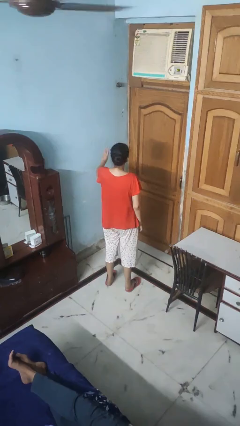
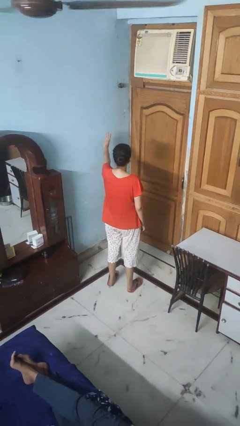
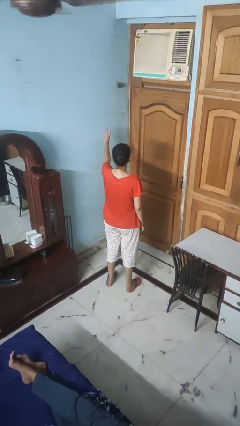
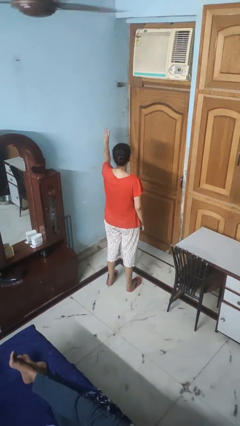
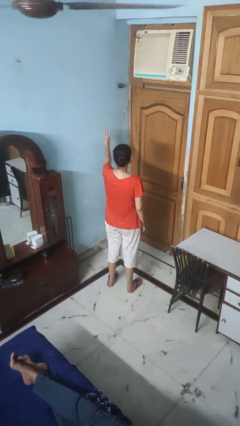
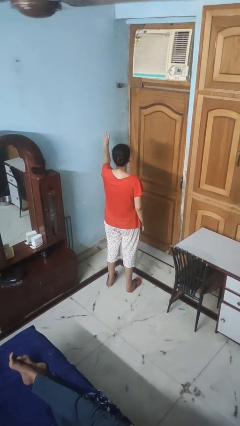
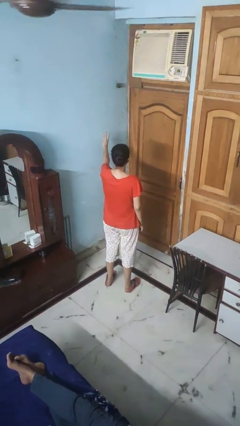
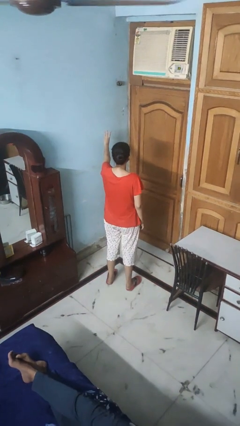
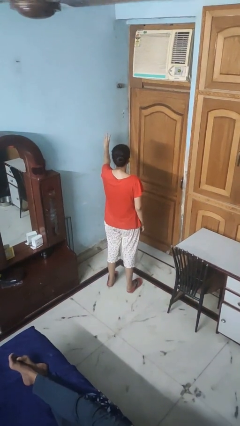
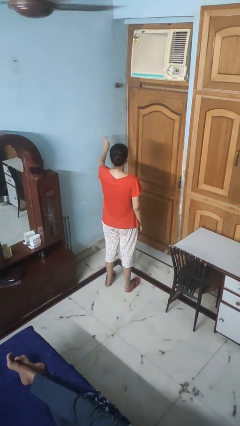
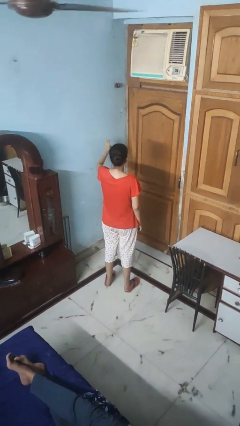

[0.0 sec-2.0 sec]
person gestures number three

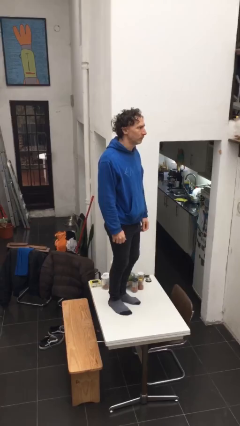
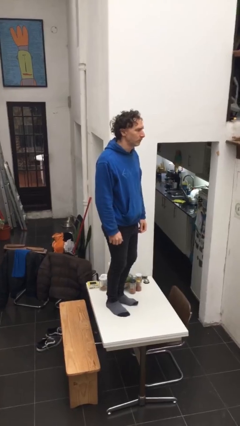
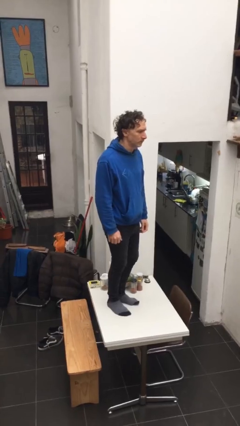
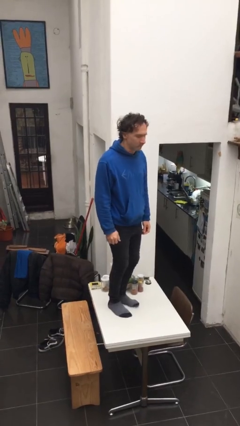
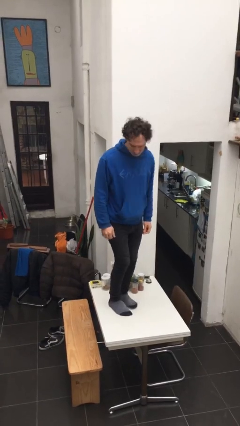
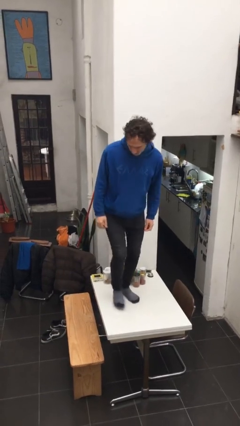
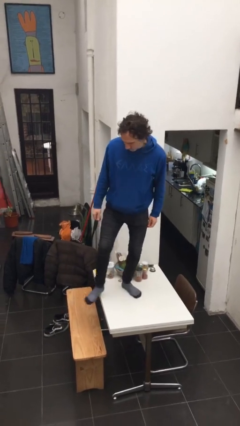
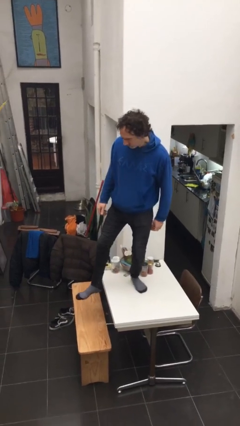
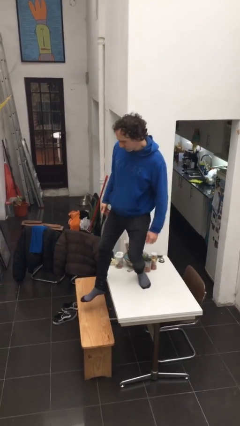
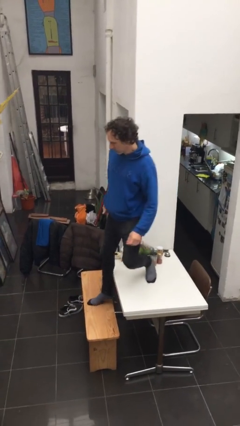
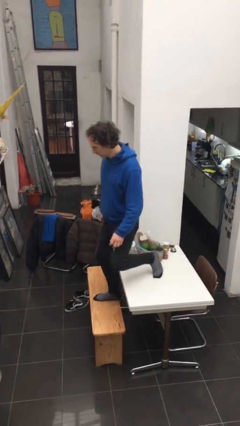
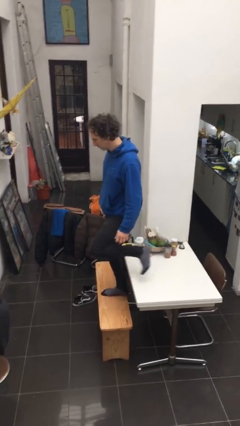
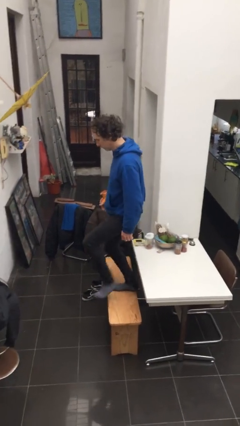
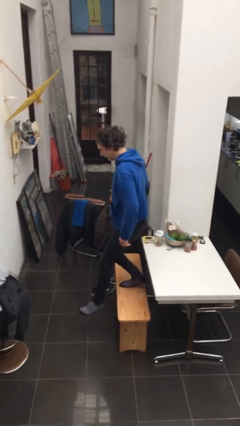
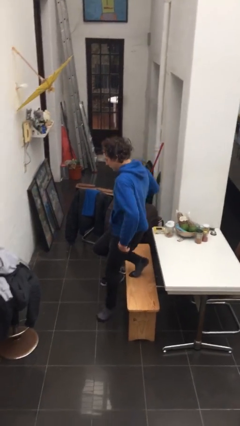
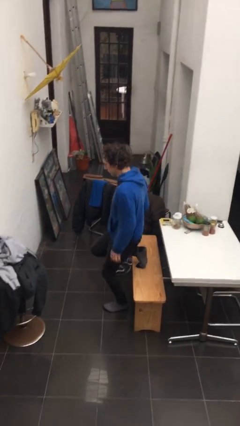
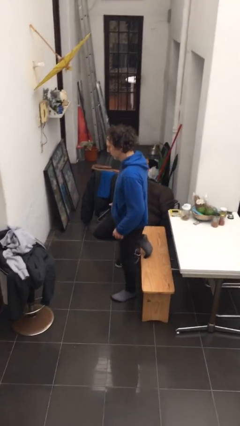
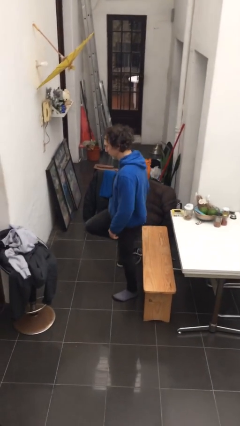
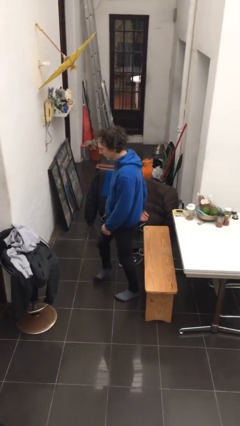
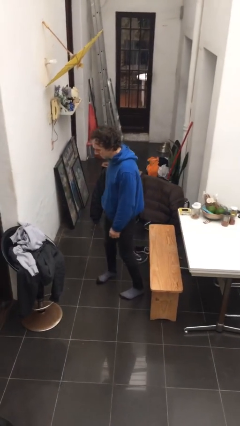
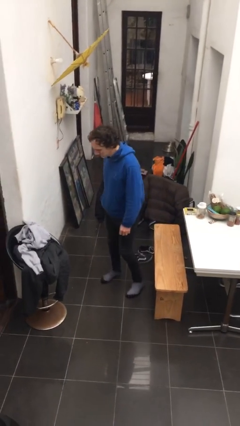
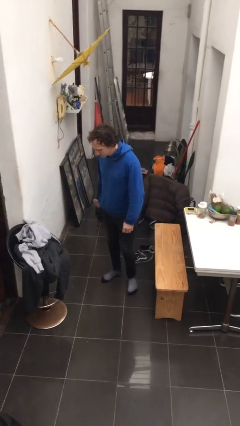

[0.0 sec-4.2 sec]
person climbs off table

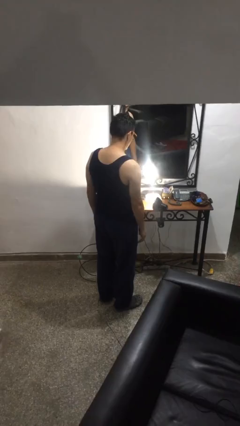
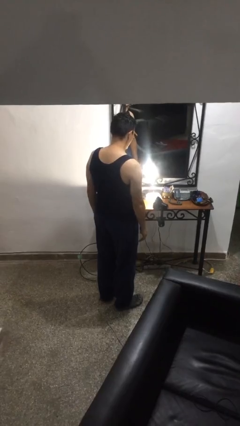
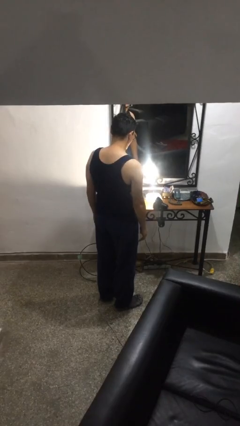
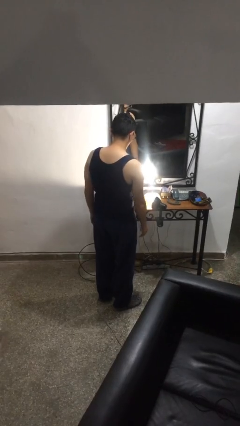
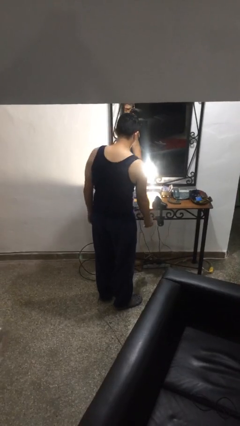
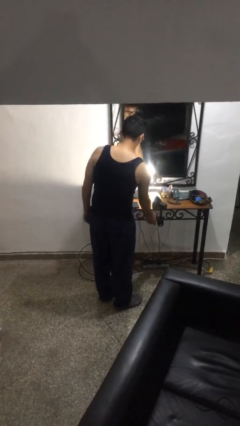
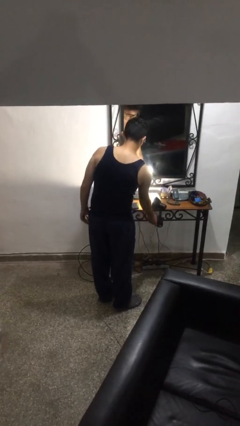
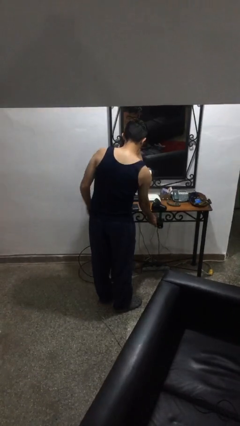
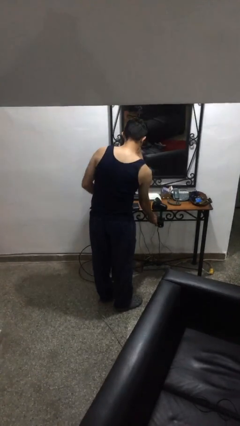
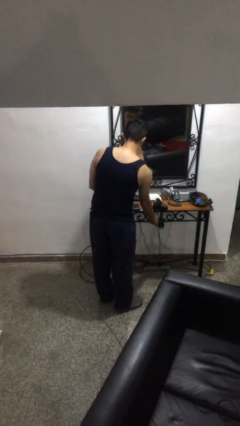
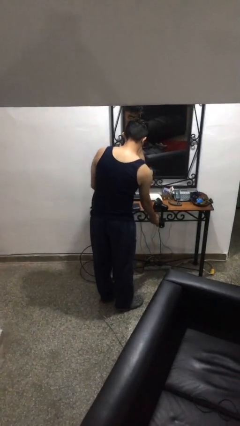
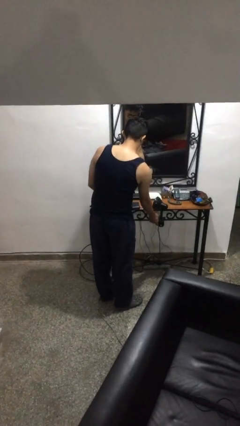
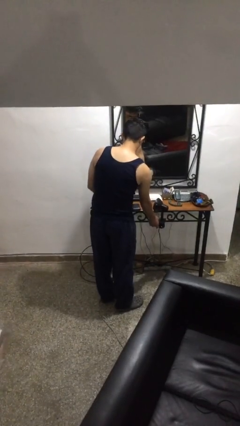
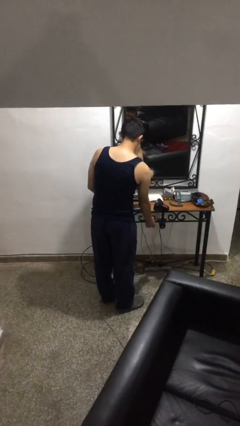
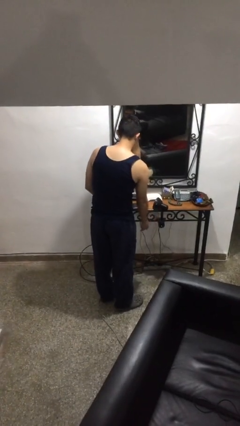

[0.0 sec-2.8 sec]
person turns off lamp

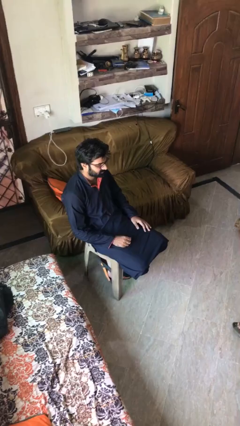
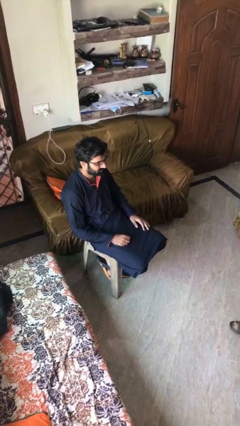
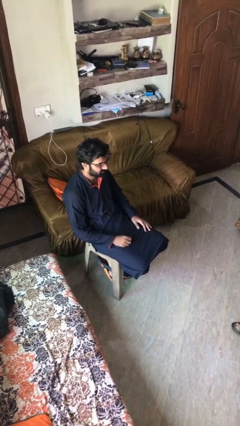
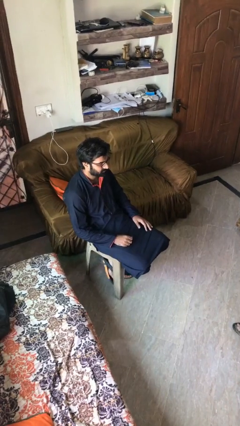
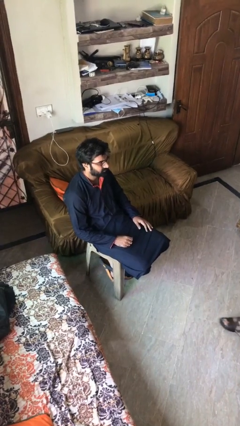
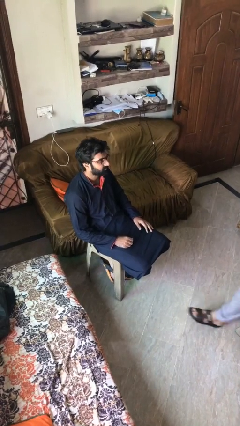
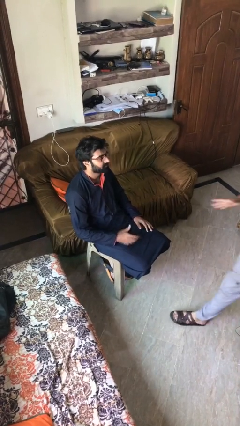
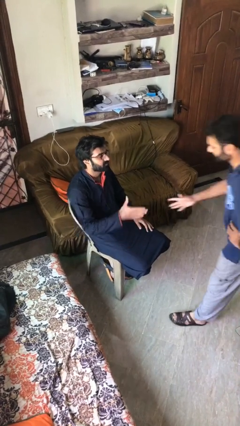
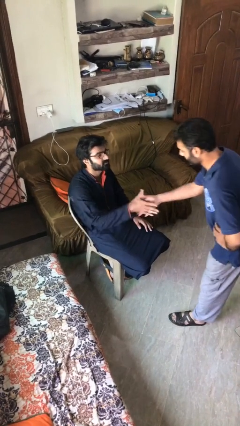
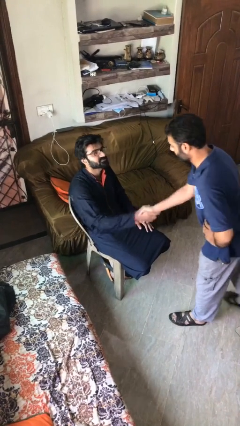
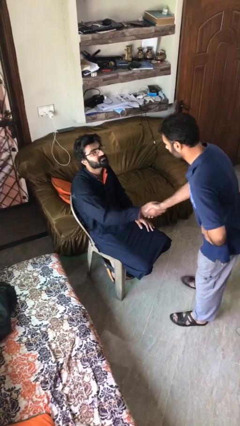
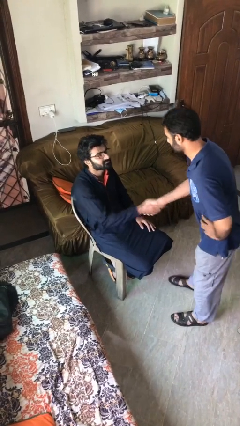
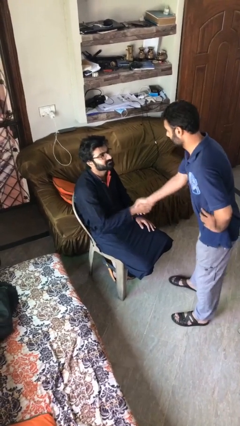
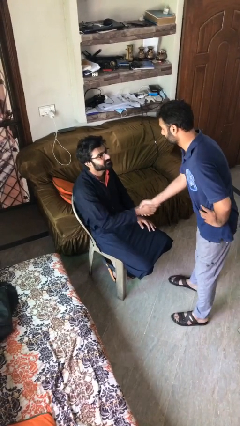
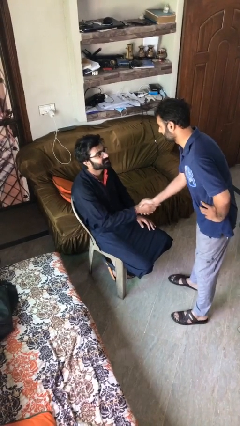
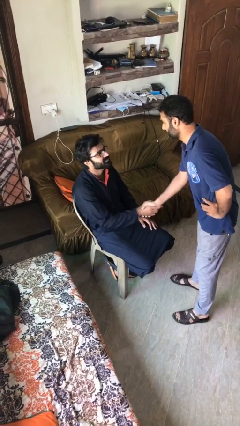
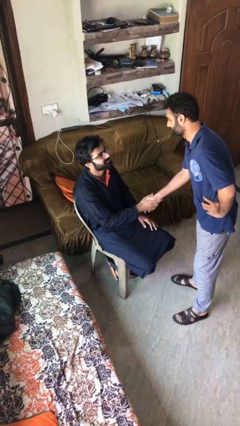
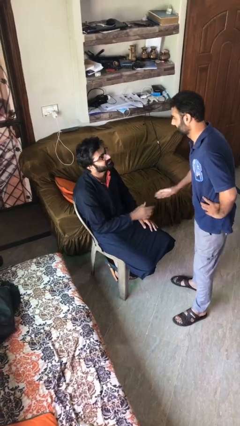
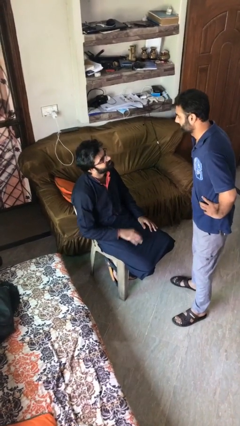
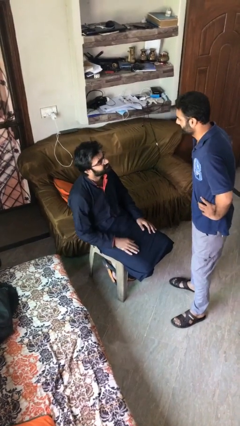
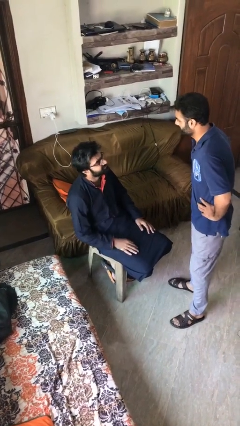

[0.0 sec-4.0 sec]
person shakes hand

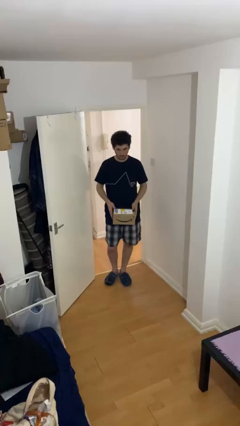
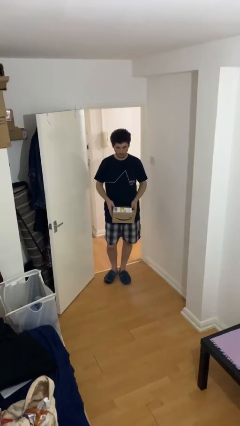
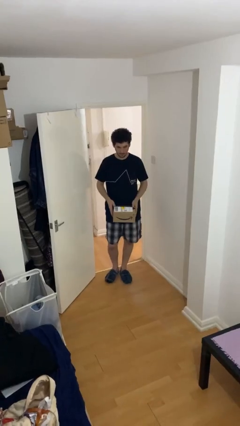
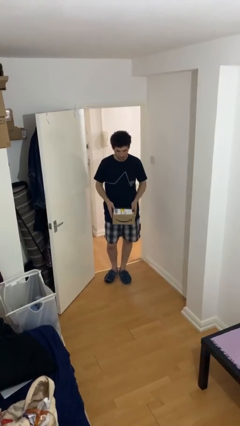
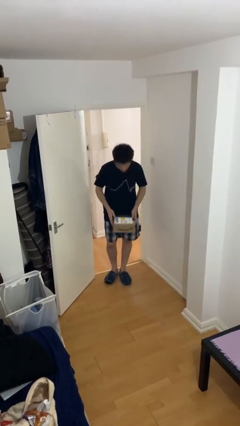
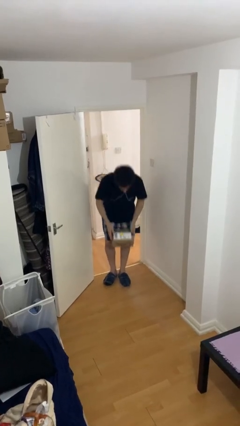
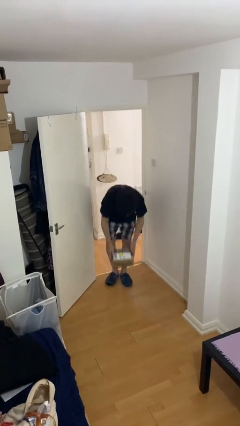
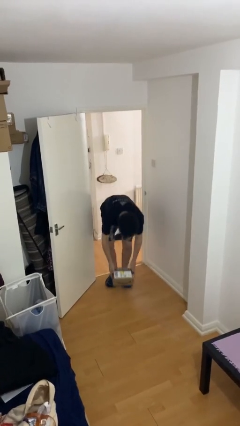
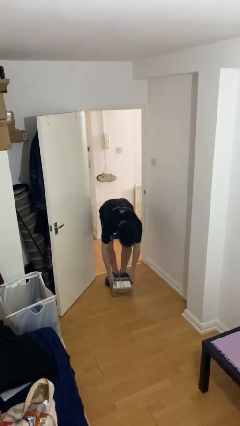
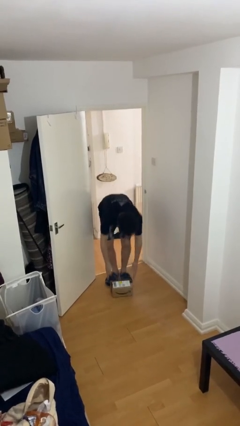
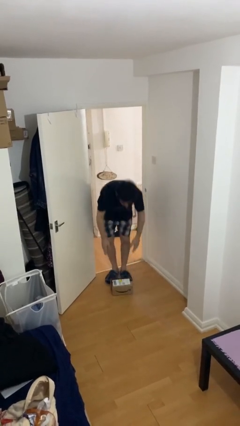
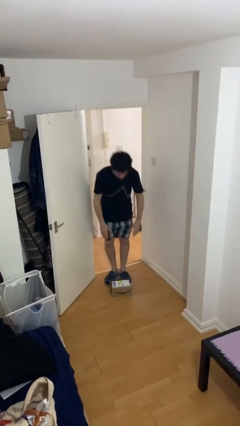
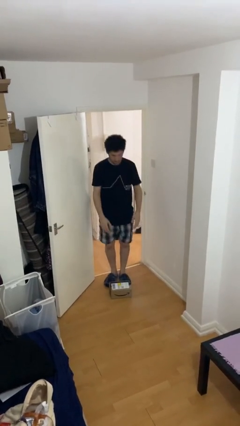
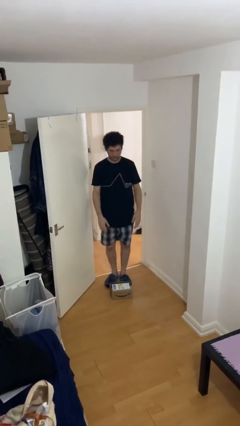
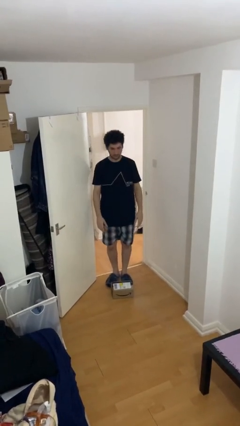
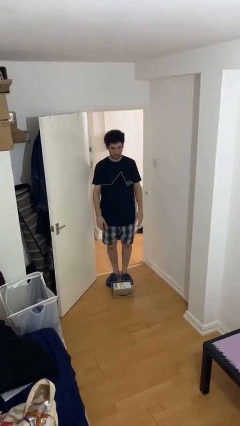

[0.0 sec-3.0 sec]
person puts down object on floor

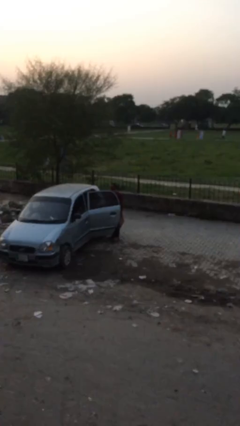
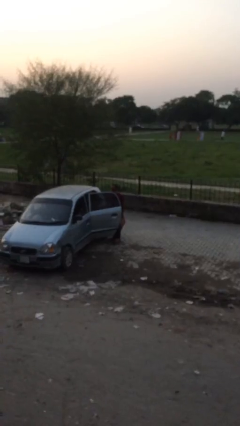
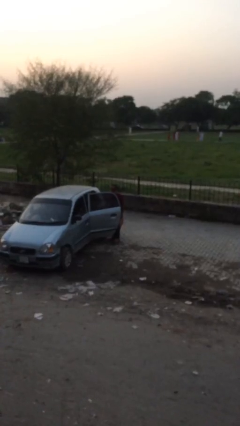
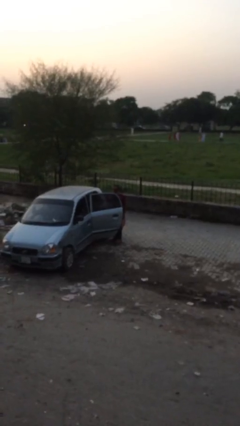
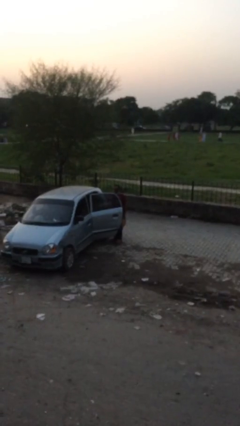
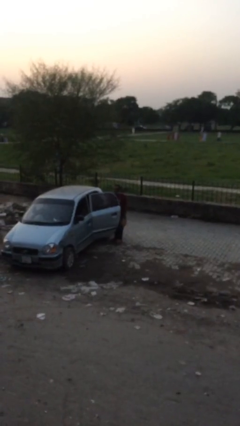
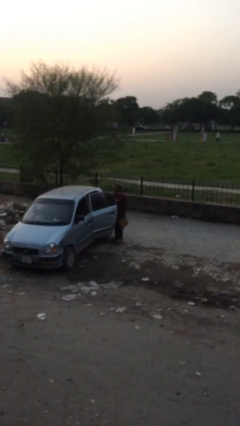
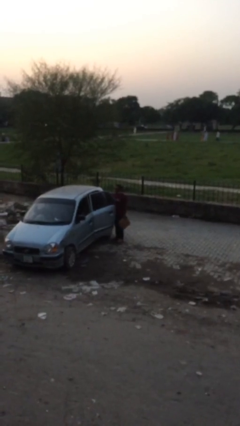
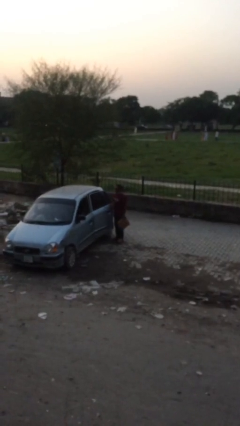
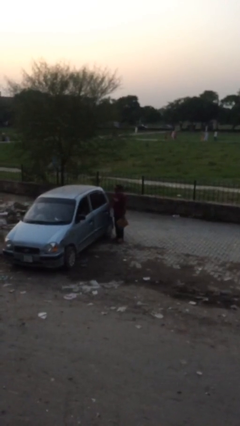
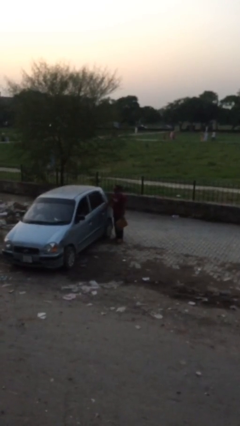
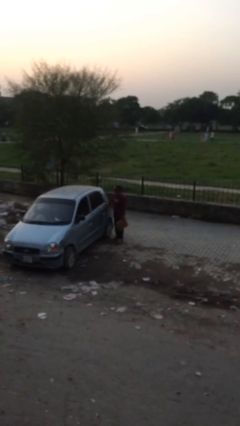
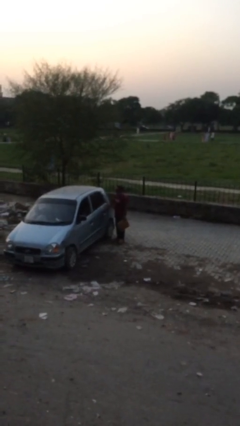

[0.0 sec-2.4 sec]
person closes car door
